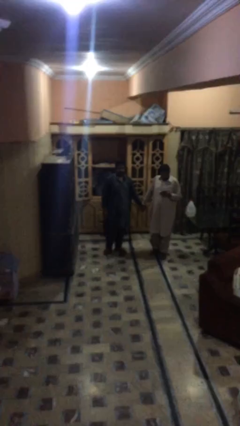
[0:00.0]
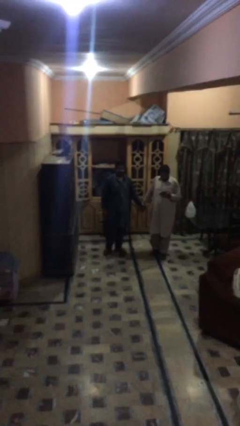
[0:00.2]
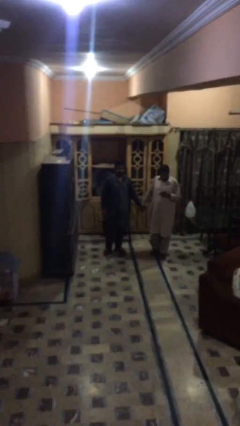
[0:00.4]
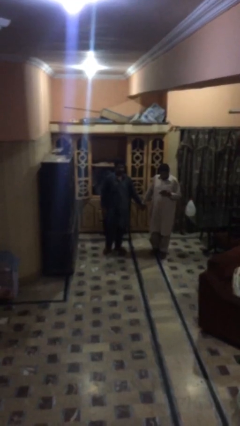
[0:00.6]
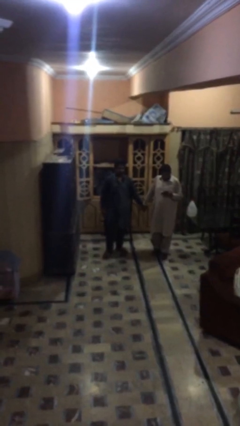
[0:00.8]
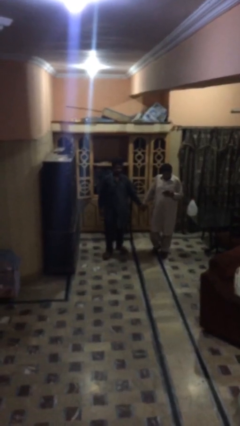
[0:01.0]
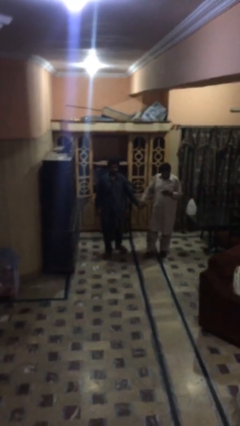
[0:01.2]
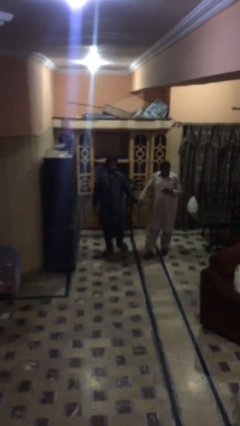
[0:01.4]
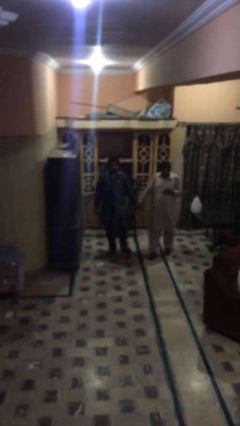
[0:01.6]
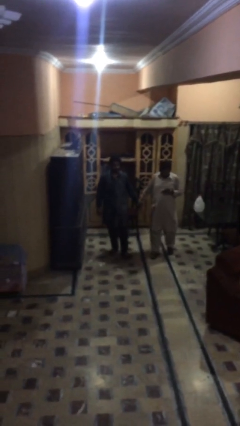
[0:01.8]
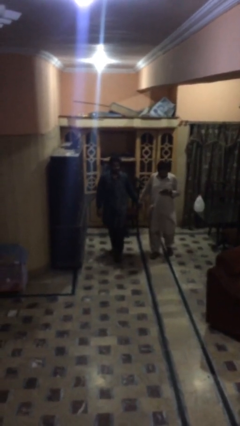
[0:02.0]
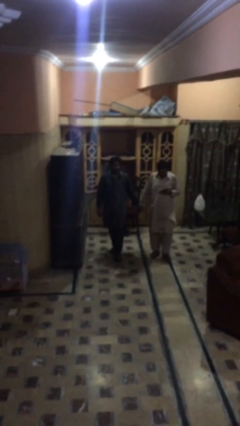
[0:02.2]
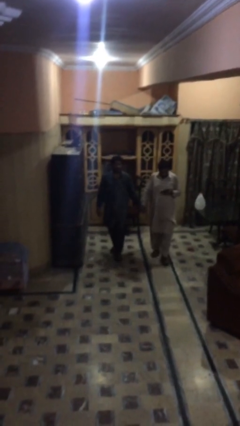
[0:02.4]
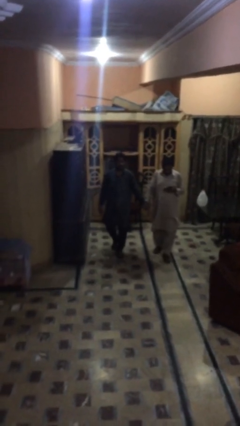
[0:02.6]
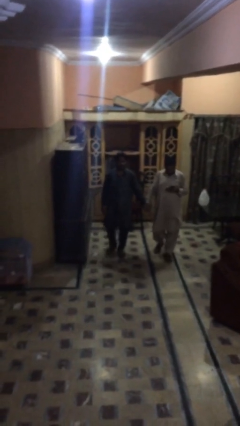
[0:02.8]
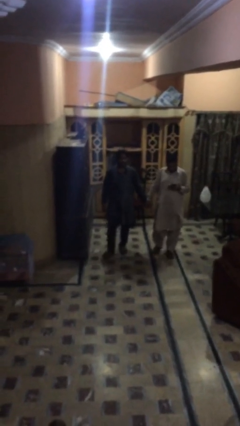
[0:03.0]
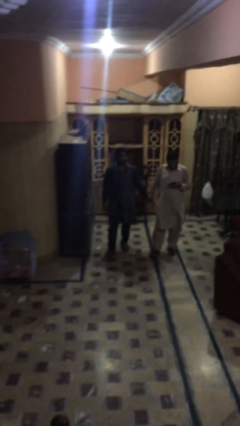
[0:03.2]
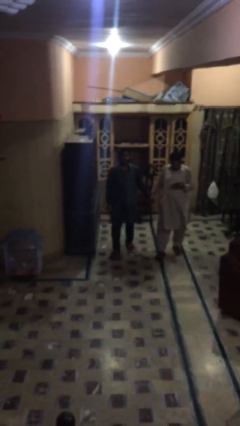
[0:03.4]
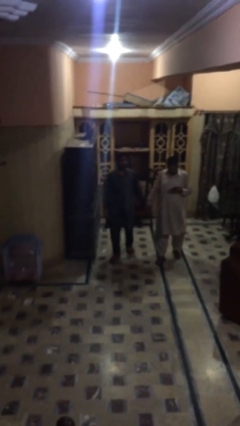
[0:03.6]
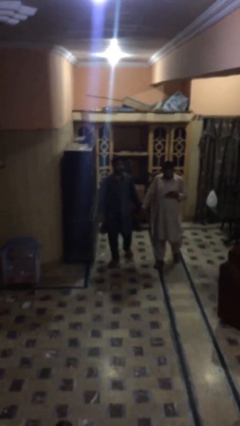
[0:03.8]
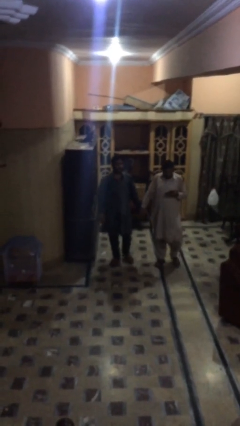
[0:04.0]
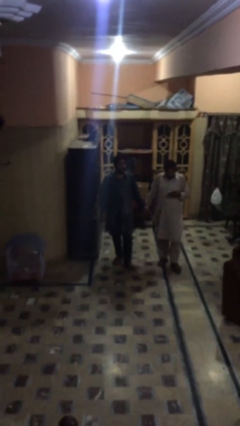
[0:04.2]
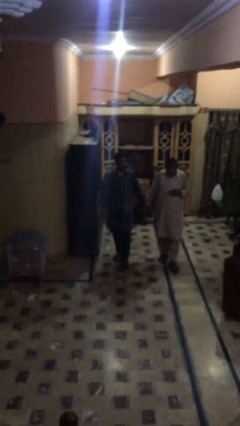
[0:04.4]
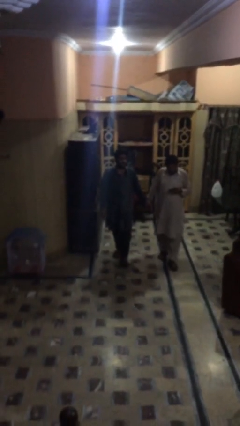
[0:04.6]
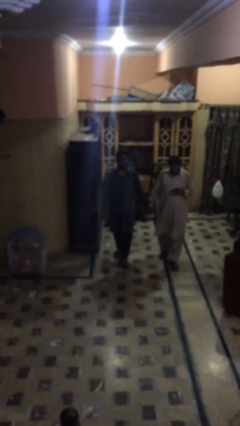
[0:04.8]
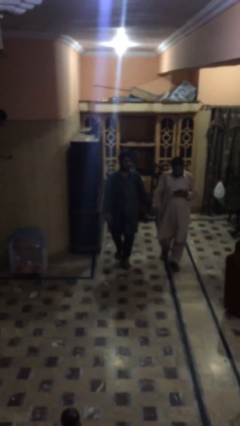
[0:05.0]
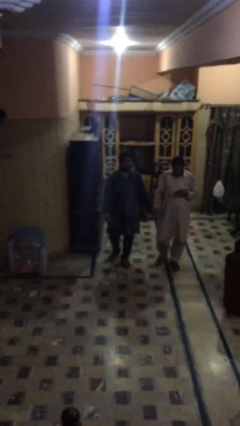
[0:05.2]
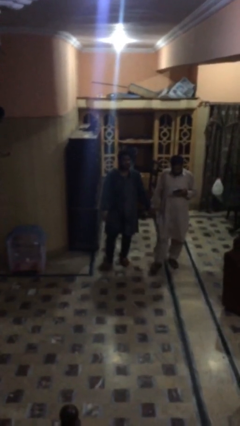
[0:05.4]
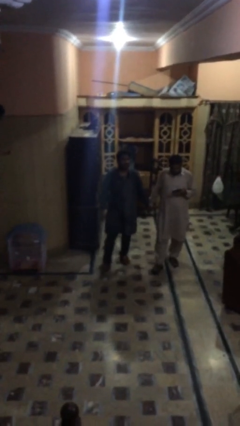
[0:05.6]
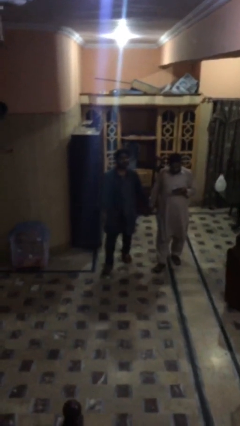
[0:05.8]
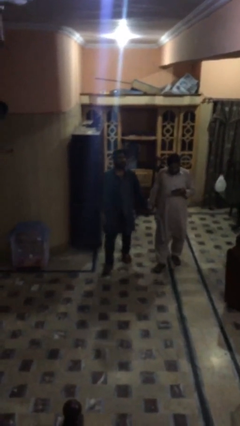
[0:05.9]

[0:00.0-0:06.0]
person holds hand

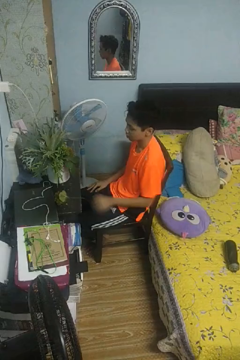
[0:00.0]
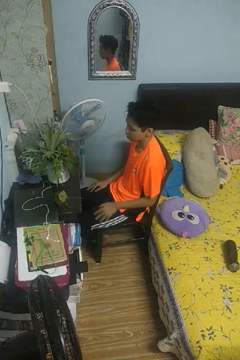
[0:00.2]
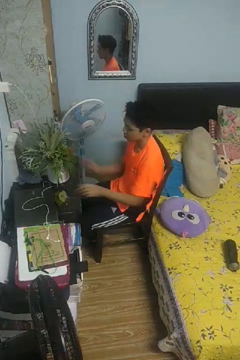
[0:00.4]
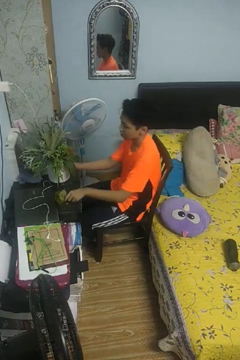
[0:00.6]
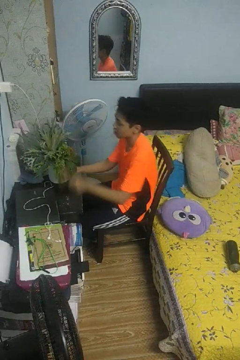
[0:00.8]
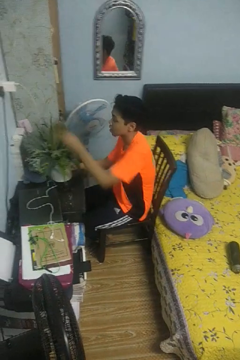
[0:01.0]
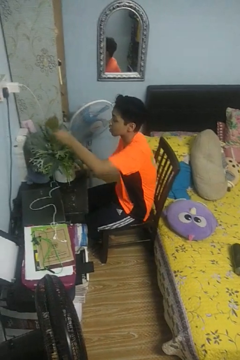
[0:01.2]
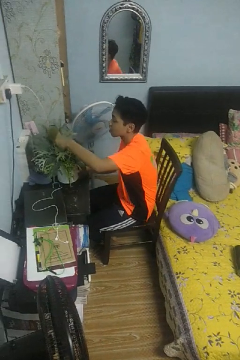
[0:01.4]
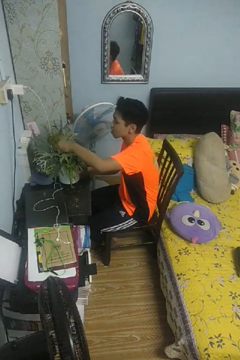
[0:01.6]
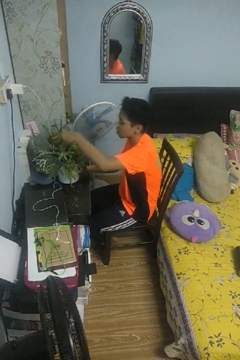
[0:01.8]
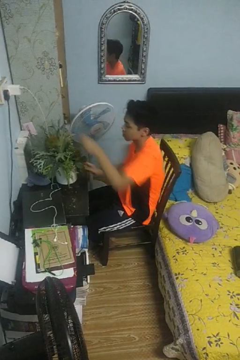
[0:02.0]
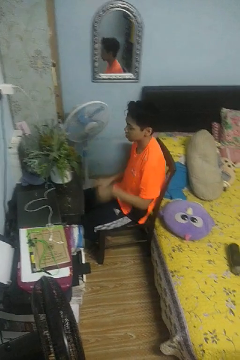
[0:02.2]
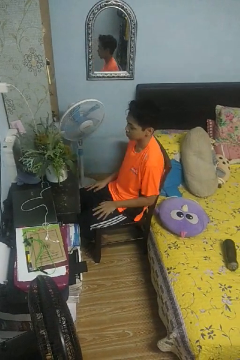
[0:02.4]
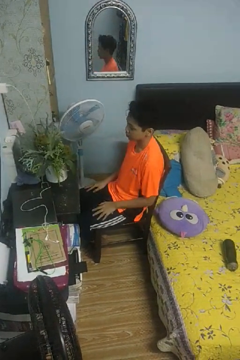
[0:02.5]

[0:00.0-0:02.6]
person arranges flowers in vase

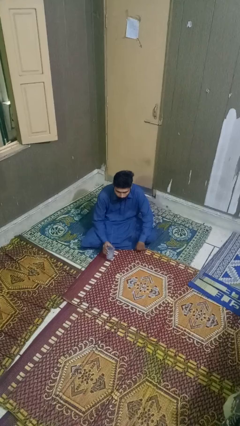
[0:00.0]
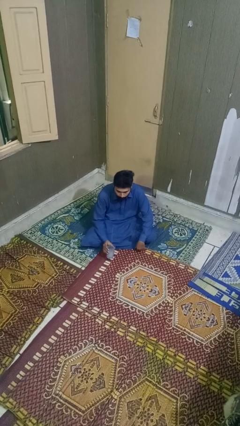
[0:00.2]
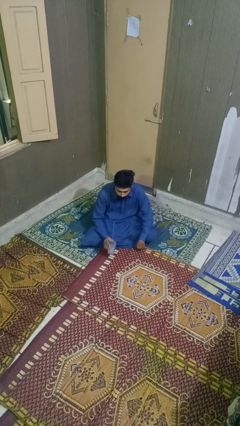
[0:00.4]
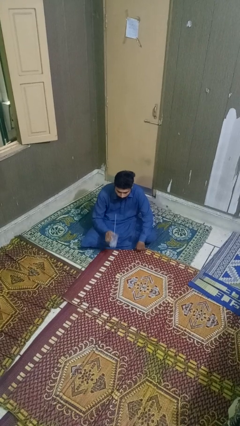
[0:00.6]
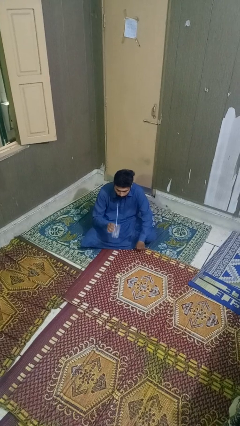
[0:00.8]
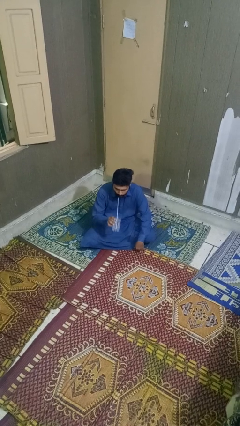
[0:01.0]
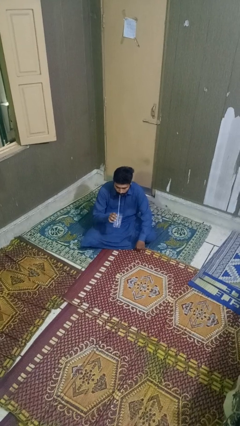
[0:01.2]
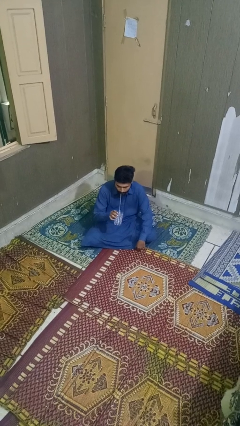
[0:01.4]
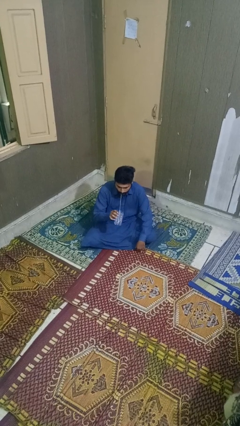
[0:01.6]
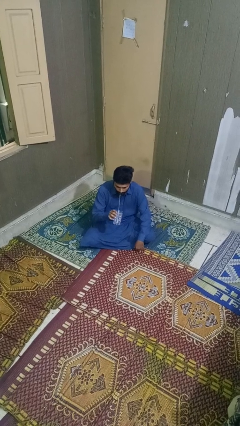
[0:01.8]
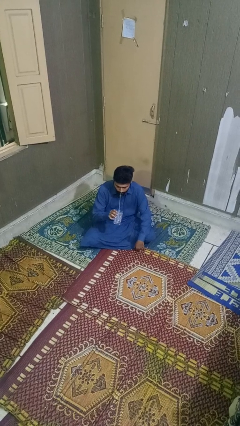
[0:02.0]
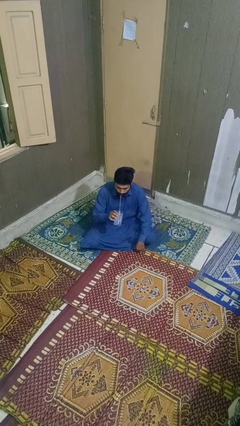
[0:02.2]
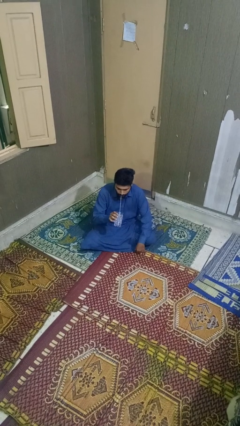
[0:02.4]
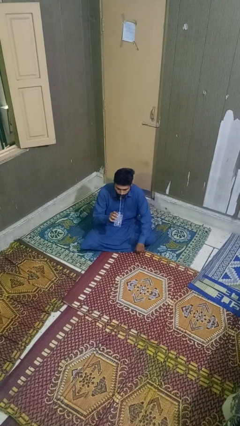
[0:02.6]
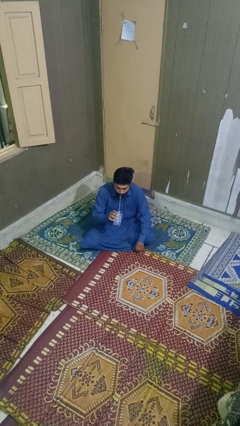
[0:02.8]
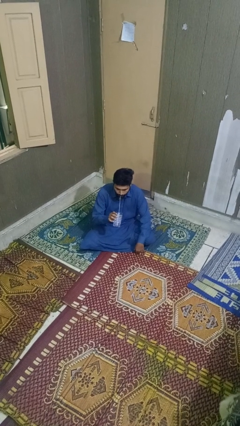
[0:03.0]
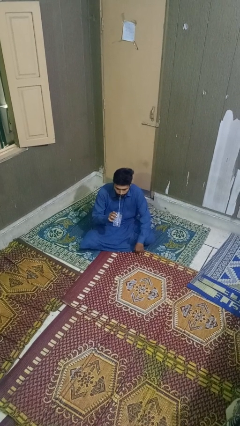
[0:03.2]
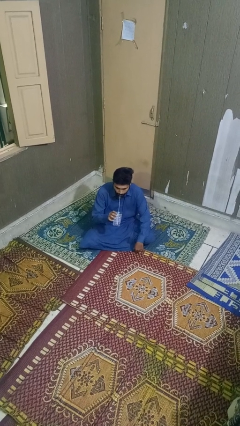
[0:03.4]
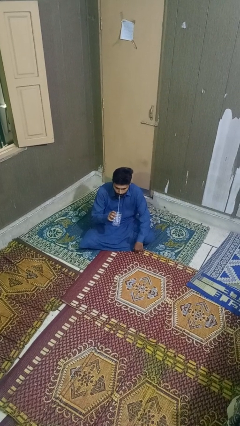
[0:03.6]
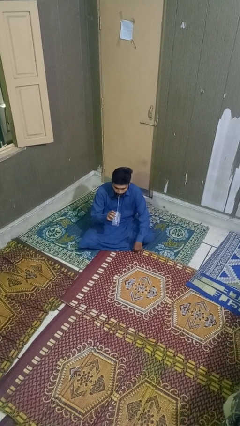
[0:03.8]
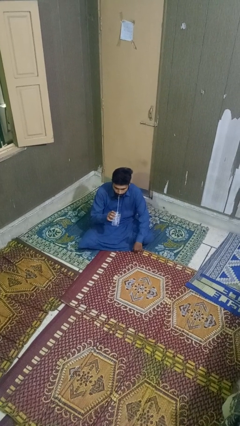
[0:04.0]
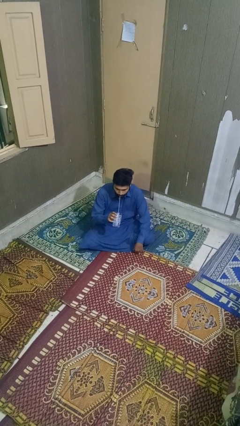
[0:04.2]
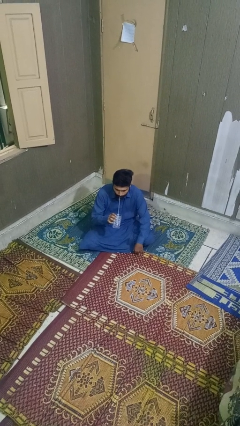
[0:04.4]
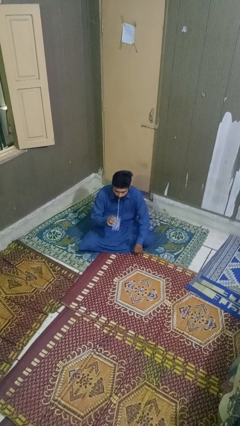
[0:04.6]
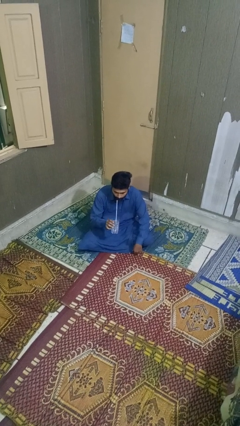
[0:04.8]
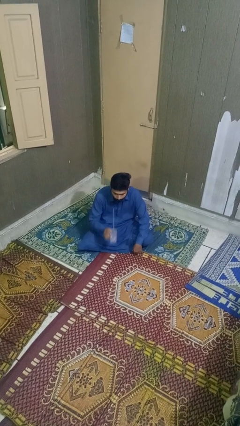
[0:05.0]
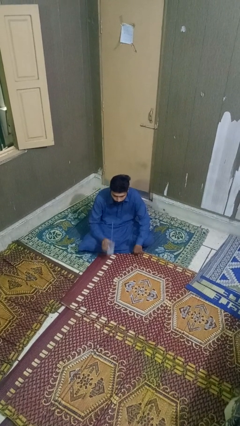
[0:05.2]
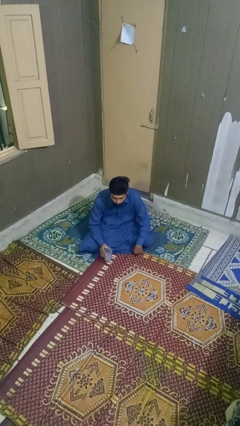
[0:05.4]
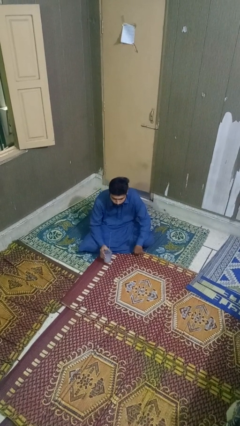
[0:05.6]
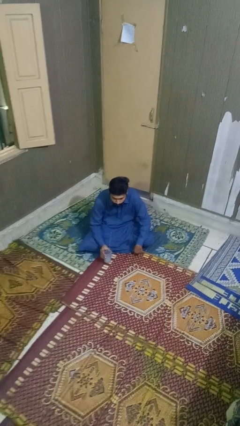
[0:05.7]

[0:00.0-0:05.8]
person drinks from straw

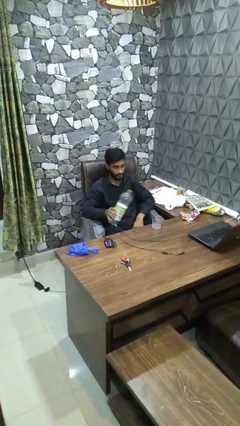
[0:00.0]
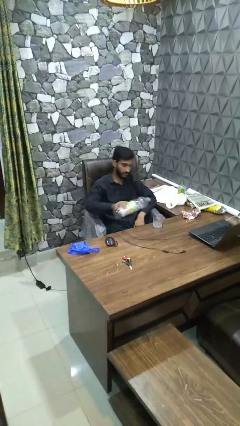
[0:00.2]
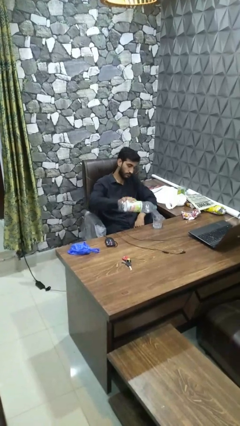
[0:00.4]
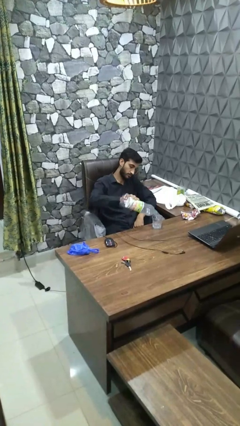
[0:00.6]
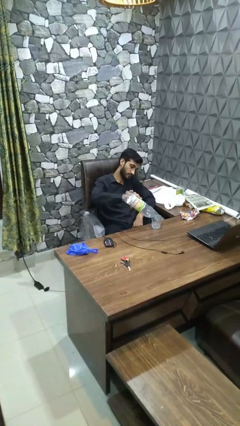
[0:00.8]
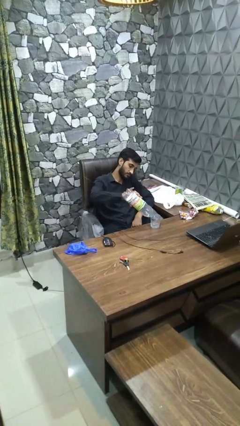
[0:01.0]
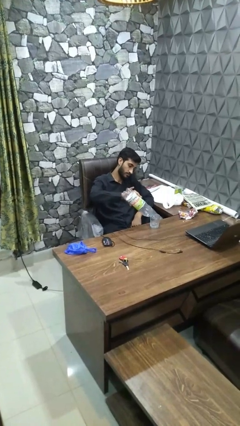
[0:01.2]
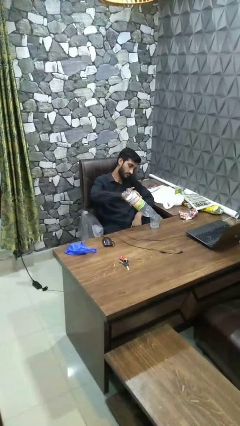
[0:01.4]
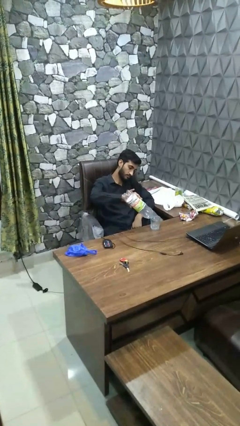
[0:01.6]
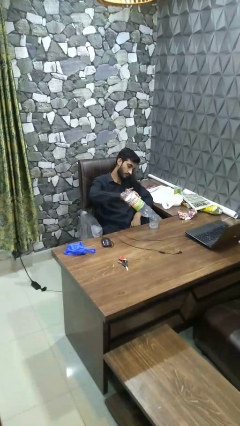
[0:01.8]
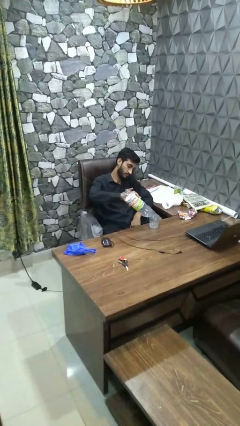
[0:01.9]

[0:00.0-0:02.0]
person pours liquid into cup

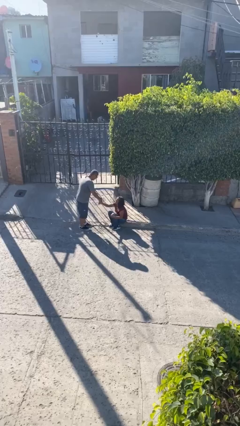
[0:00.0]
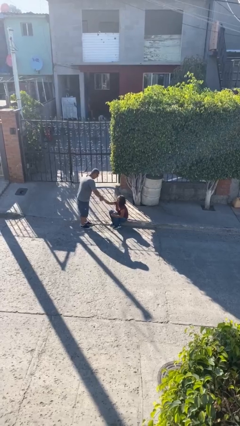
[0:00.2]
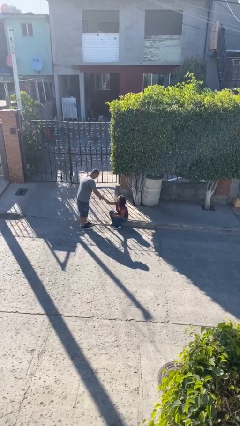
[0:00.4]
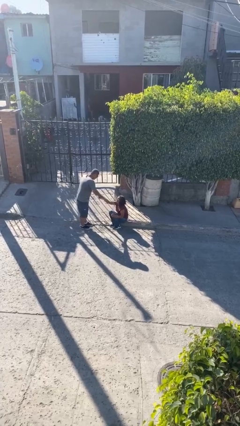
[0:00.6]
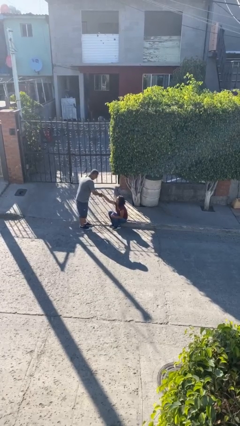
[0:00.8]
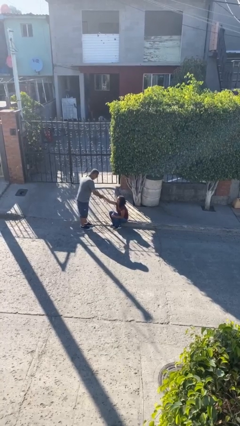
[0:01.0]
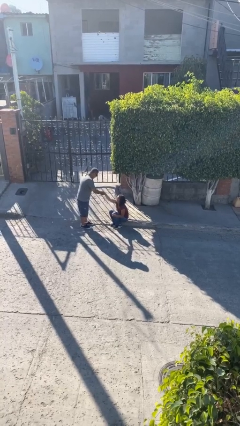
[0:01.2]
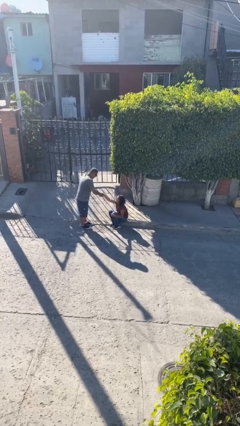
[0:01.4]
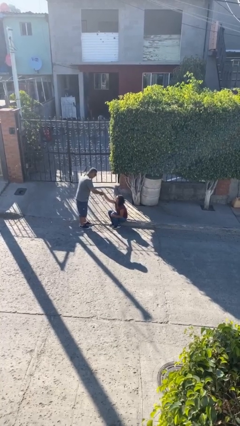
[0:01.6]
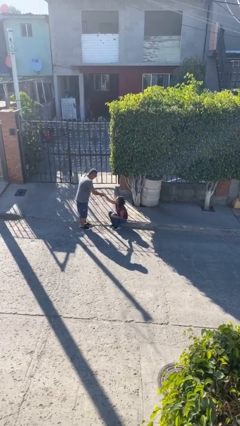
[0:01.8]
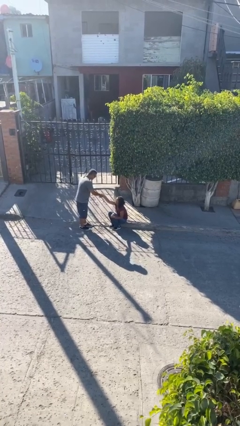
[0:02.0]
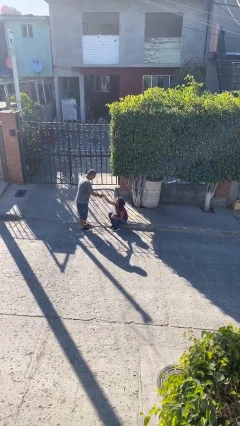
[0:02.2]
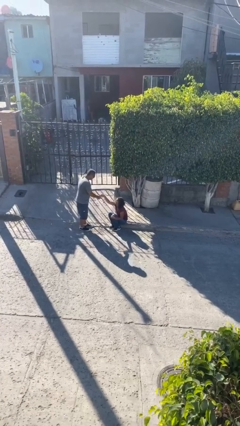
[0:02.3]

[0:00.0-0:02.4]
person shakes hand
